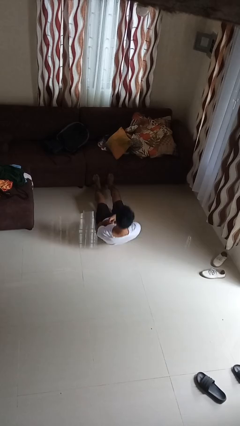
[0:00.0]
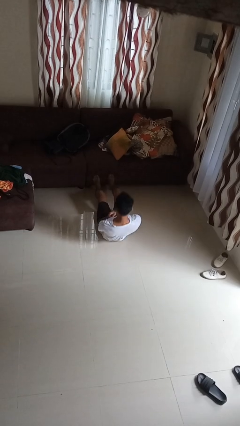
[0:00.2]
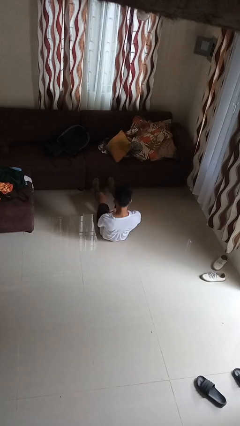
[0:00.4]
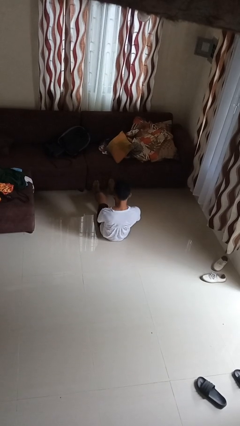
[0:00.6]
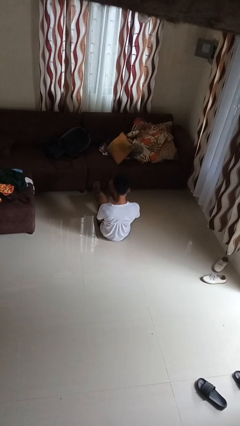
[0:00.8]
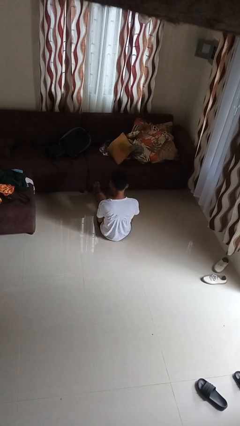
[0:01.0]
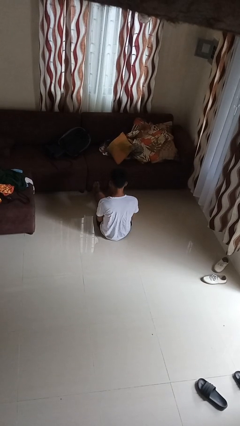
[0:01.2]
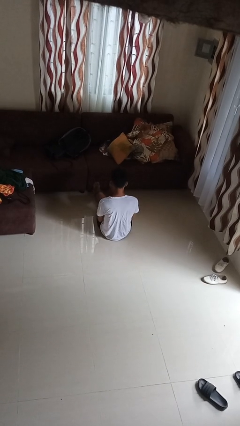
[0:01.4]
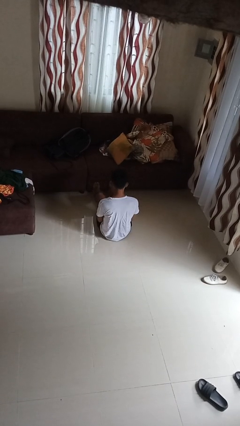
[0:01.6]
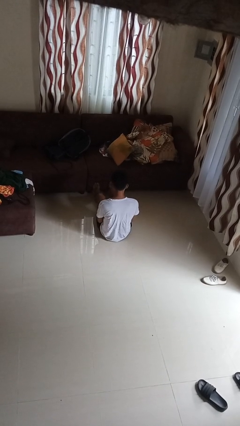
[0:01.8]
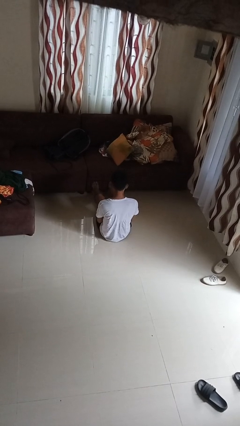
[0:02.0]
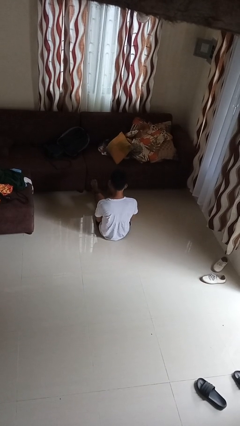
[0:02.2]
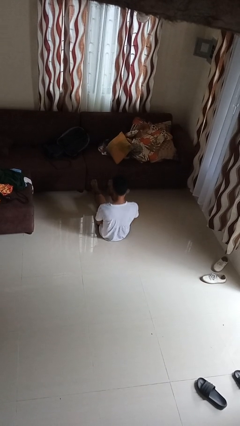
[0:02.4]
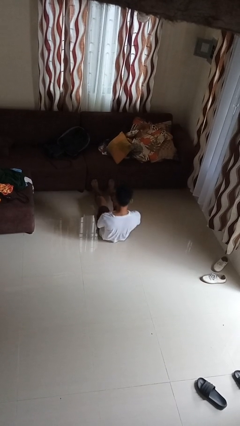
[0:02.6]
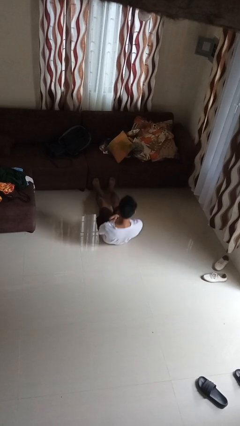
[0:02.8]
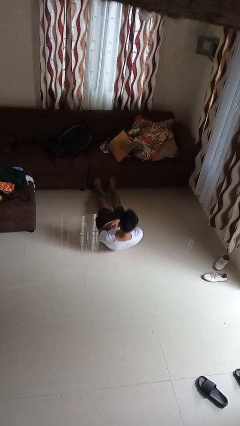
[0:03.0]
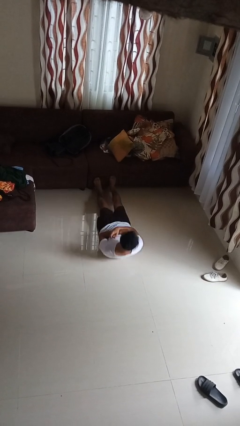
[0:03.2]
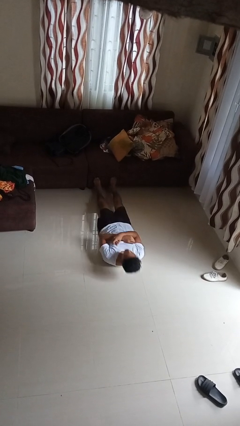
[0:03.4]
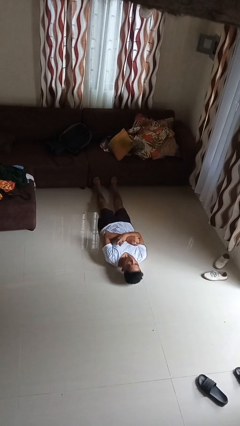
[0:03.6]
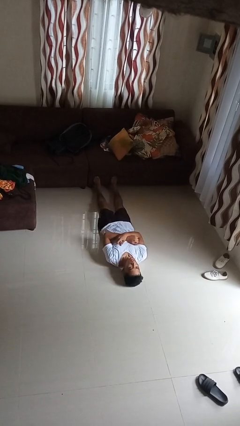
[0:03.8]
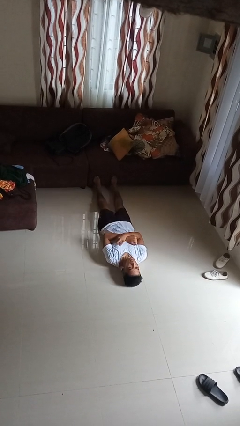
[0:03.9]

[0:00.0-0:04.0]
person exercises with situp

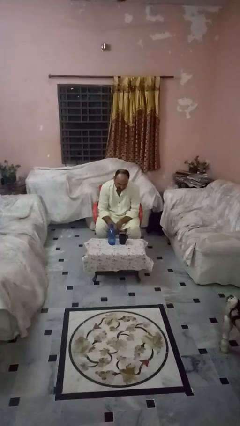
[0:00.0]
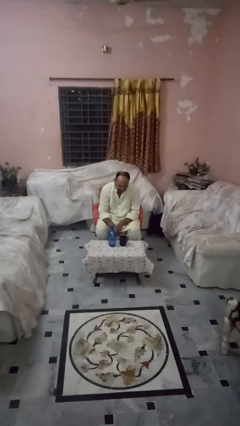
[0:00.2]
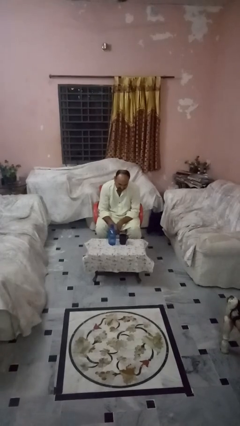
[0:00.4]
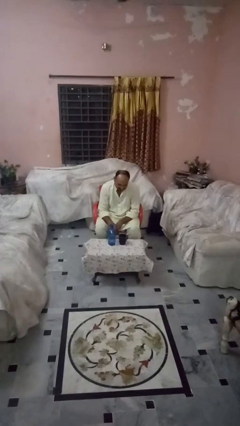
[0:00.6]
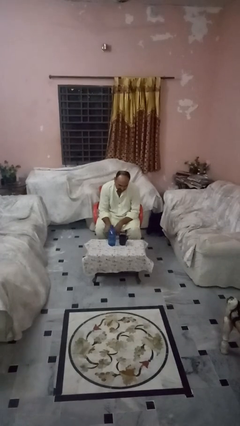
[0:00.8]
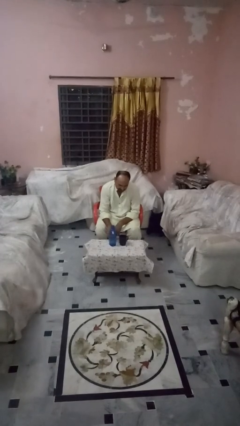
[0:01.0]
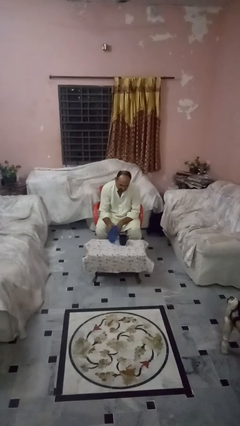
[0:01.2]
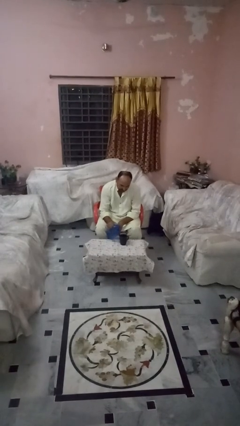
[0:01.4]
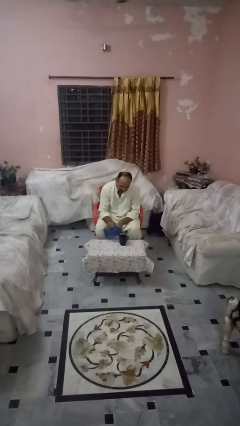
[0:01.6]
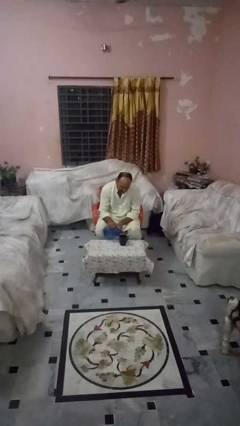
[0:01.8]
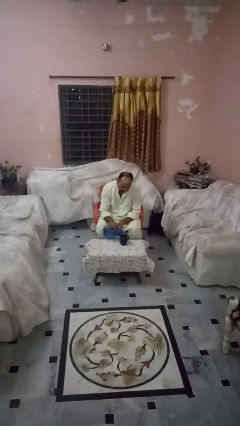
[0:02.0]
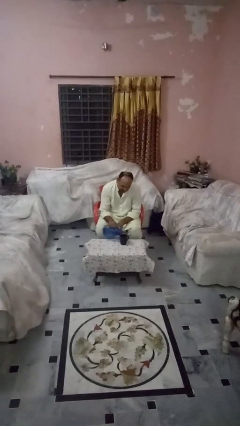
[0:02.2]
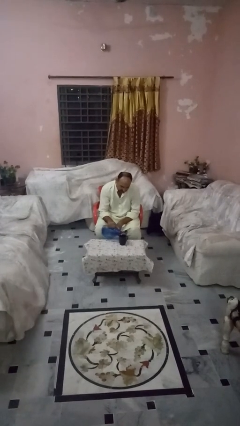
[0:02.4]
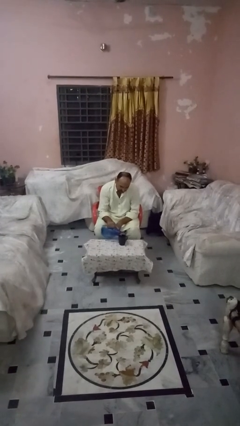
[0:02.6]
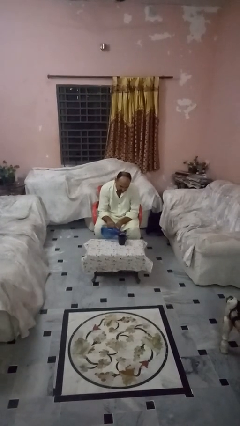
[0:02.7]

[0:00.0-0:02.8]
person pours liquid into cup

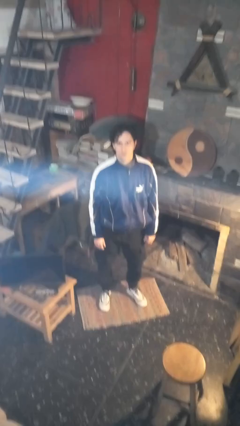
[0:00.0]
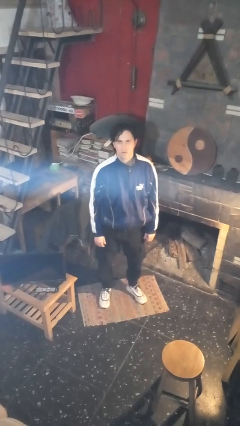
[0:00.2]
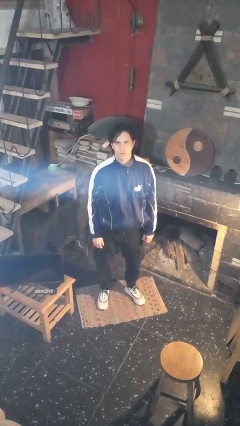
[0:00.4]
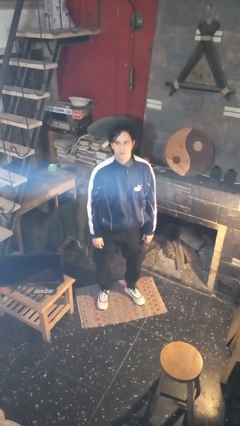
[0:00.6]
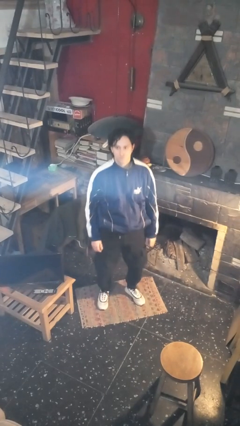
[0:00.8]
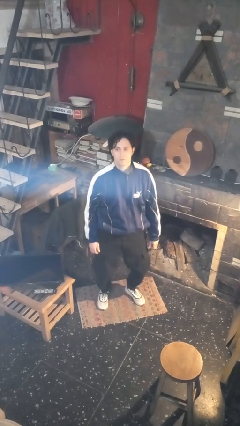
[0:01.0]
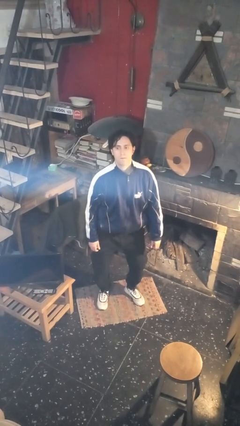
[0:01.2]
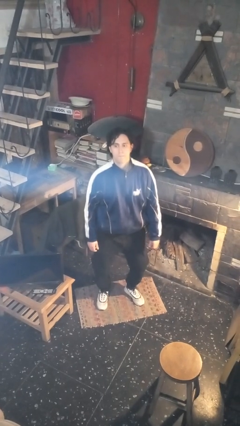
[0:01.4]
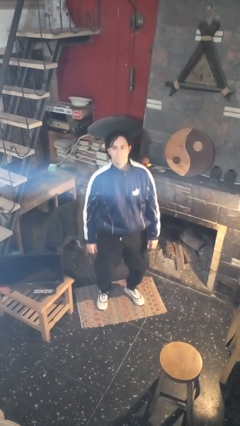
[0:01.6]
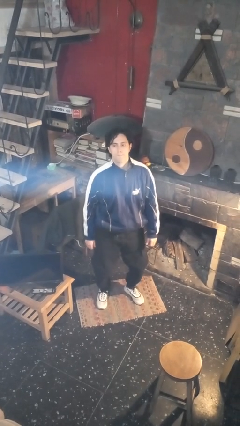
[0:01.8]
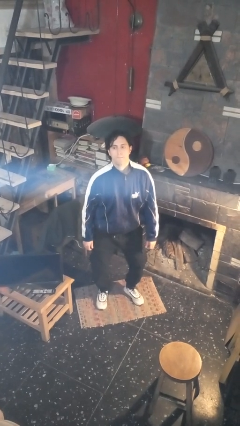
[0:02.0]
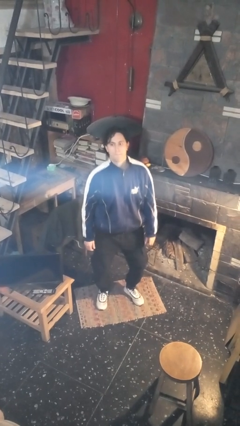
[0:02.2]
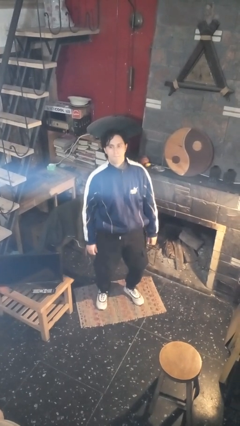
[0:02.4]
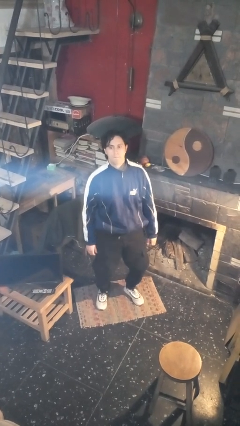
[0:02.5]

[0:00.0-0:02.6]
person wiggles hips

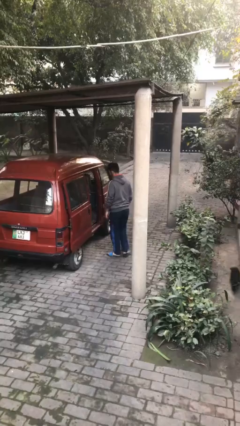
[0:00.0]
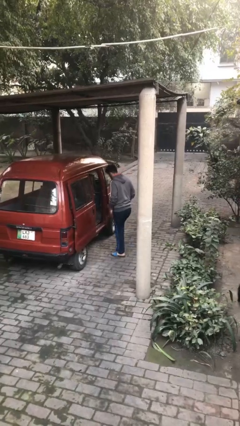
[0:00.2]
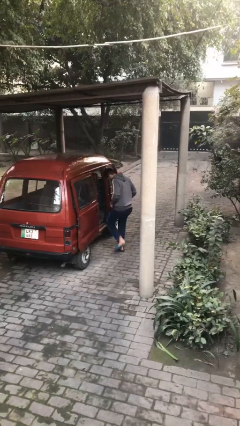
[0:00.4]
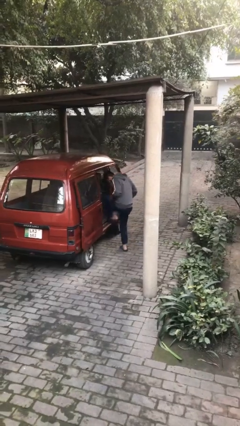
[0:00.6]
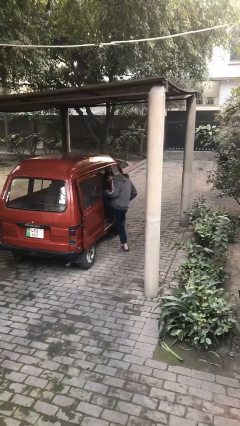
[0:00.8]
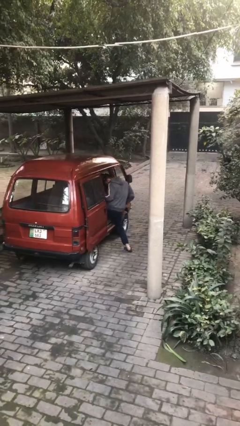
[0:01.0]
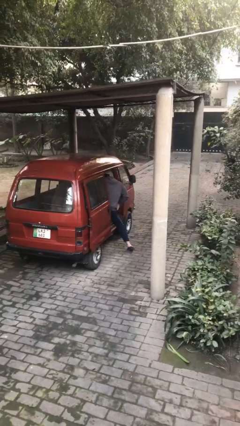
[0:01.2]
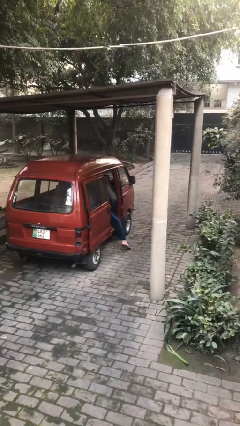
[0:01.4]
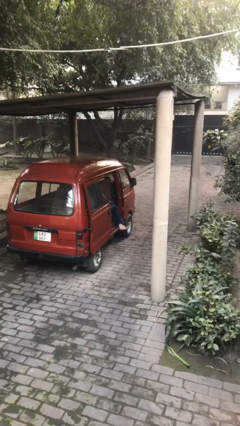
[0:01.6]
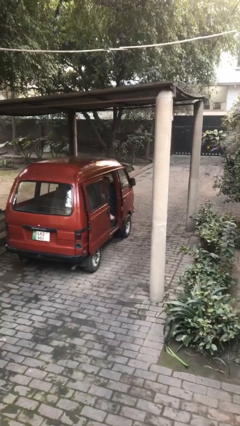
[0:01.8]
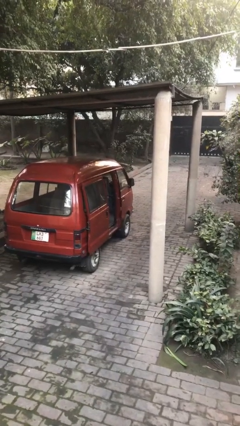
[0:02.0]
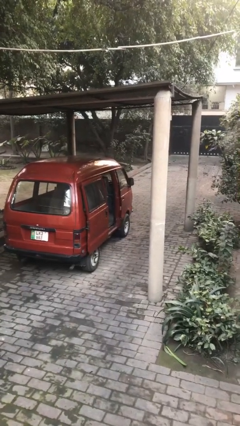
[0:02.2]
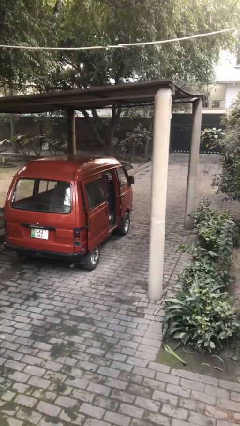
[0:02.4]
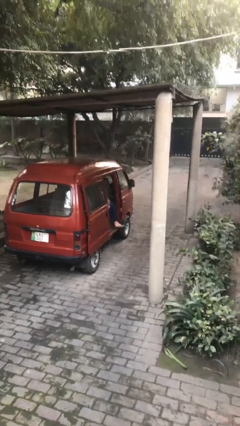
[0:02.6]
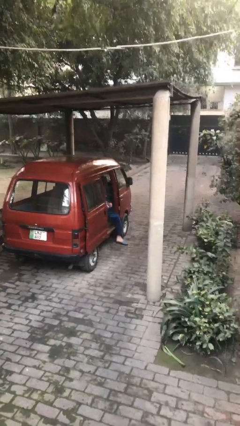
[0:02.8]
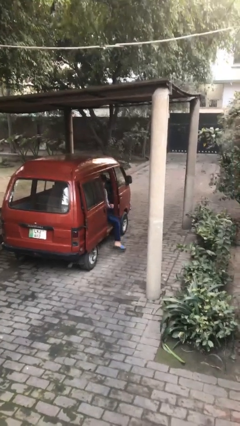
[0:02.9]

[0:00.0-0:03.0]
person enters car

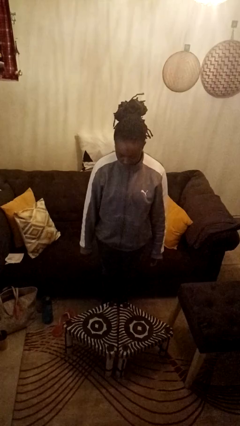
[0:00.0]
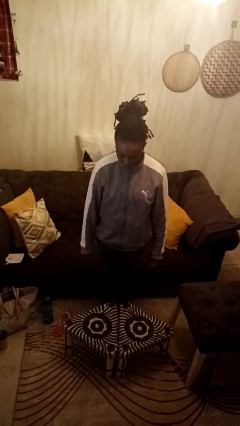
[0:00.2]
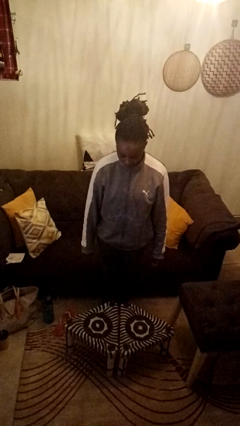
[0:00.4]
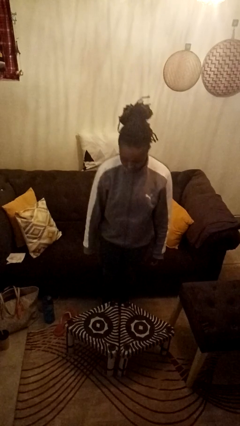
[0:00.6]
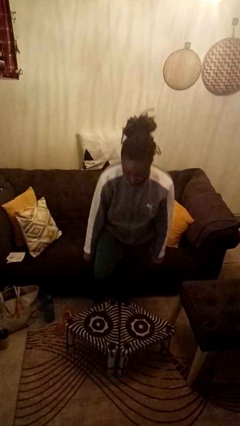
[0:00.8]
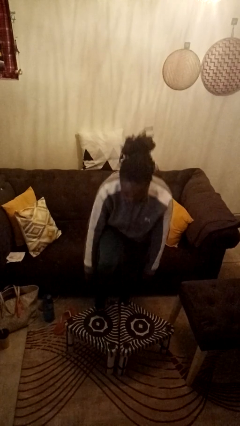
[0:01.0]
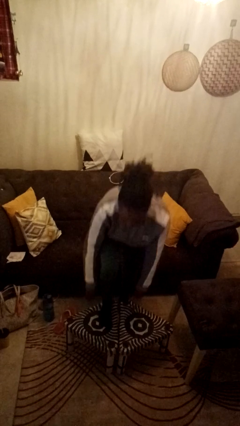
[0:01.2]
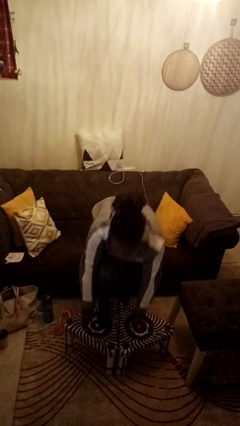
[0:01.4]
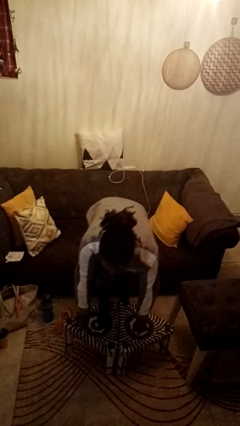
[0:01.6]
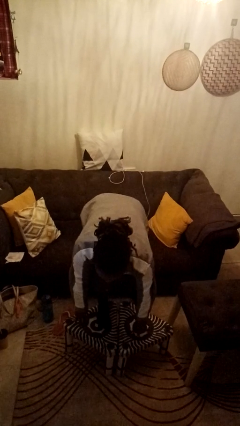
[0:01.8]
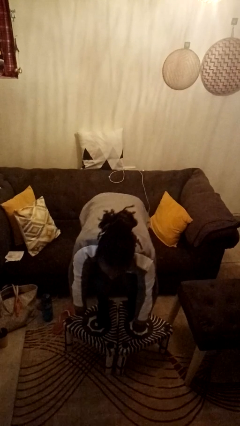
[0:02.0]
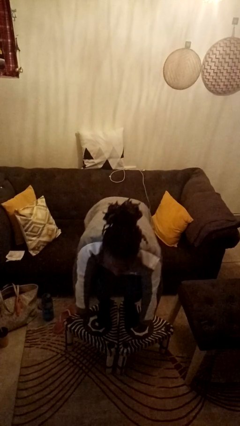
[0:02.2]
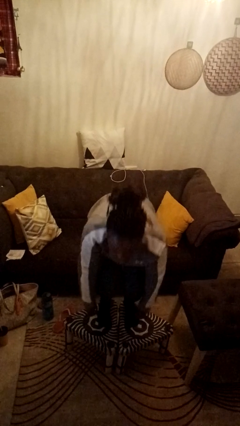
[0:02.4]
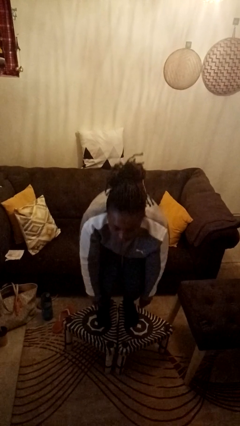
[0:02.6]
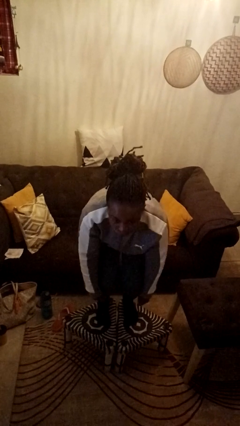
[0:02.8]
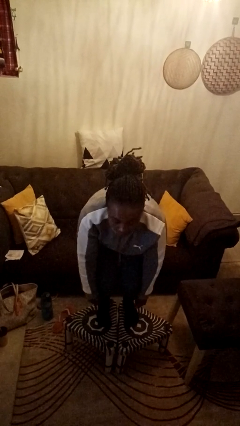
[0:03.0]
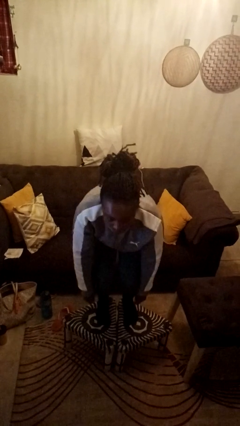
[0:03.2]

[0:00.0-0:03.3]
person climbs on table

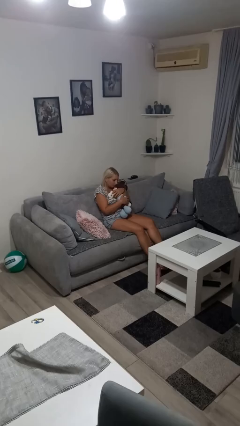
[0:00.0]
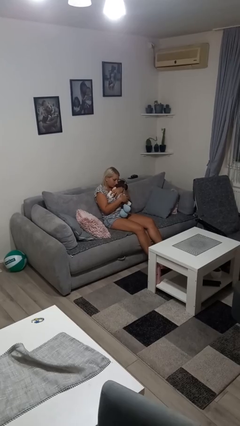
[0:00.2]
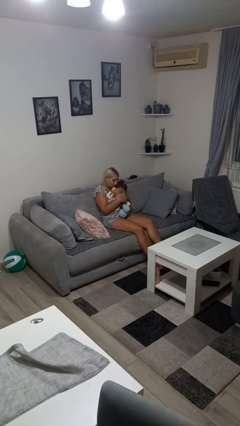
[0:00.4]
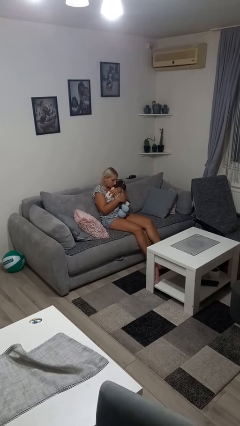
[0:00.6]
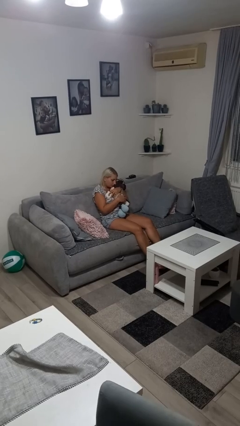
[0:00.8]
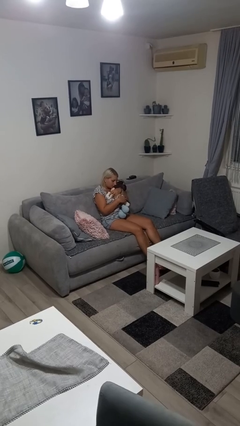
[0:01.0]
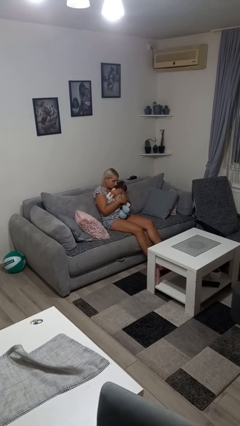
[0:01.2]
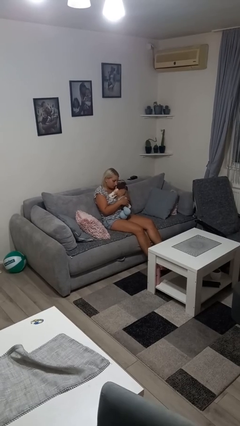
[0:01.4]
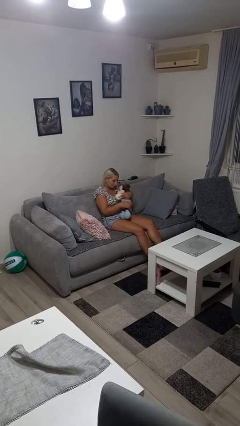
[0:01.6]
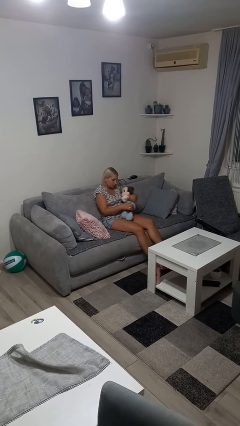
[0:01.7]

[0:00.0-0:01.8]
person hugs stuffed animal
